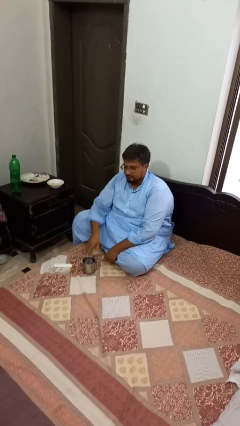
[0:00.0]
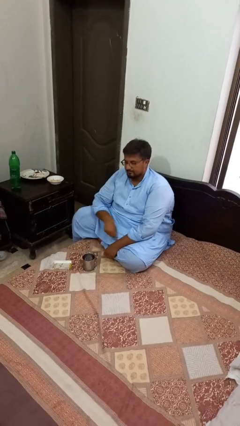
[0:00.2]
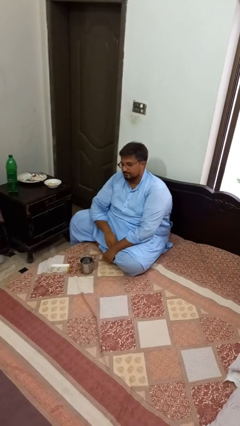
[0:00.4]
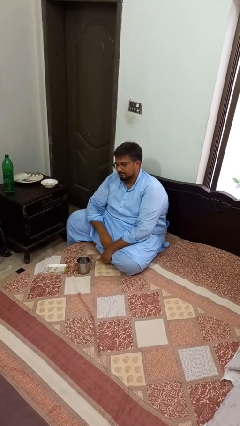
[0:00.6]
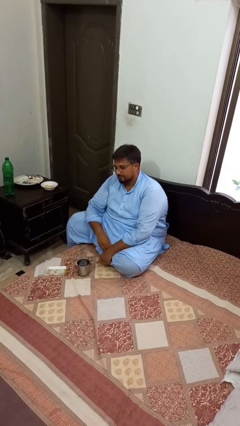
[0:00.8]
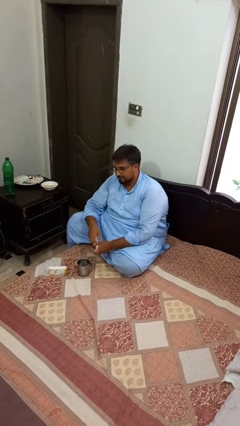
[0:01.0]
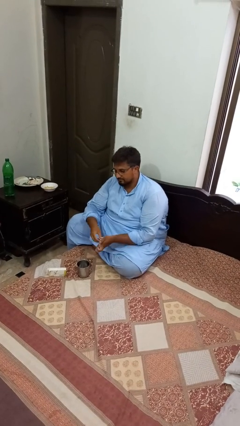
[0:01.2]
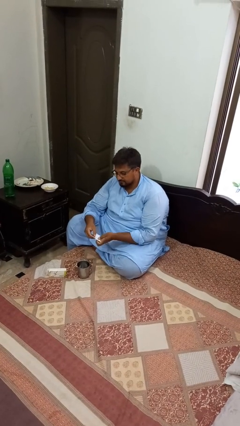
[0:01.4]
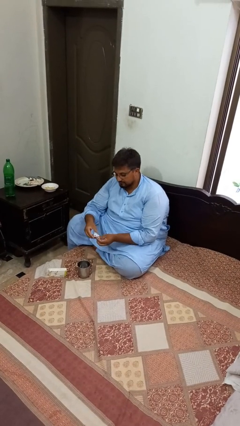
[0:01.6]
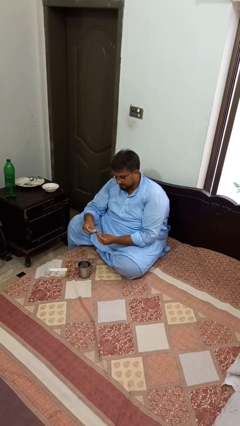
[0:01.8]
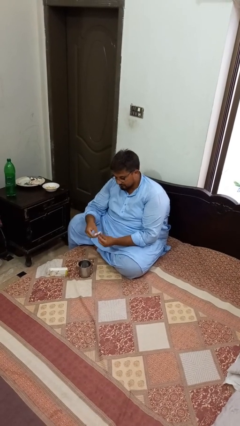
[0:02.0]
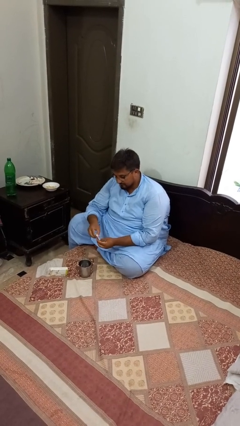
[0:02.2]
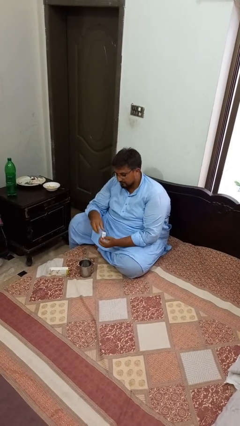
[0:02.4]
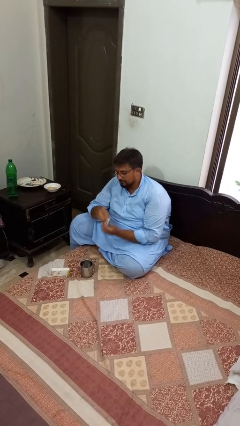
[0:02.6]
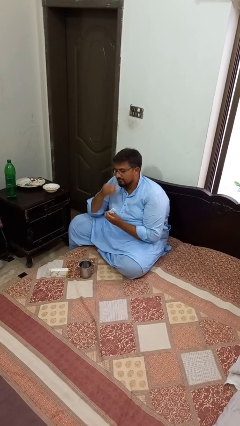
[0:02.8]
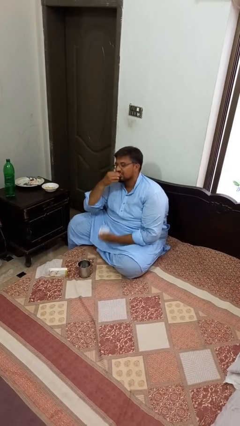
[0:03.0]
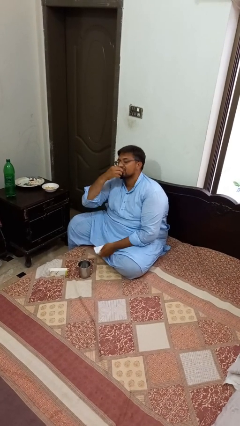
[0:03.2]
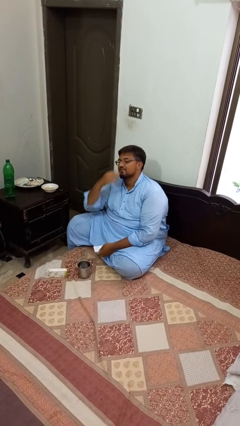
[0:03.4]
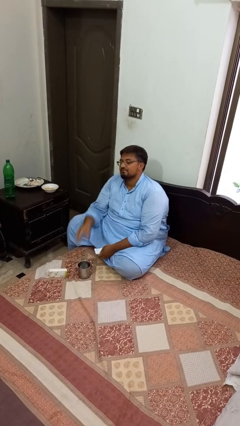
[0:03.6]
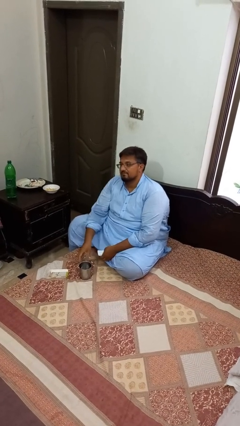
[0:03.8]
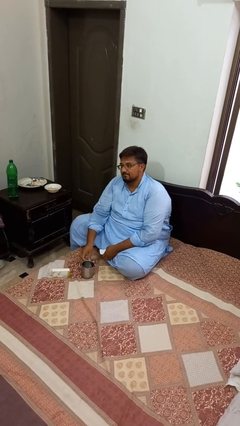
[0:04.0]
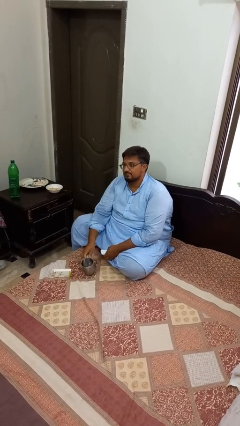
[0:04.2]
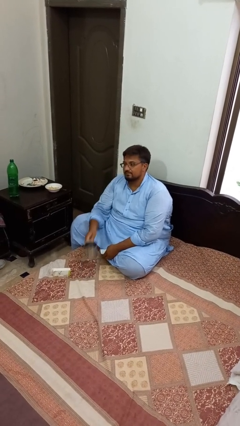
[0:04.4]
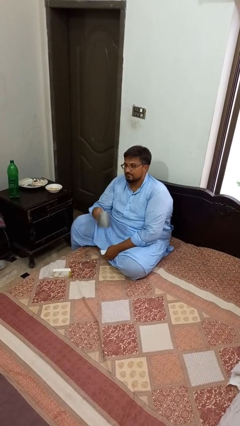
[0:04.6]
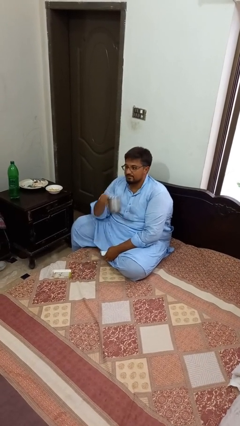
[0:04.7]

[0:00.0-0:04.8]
person takes medicine pills

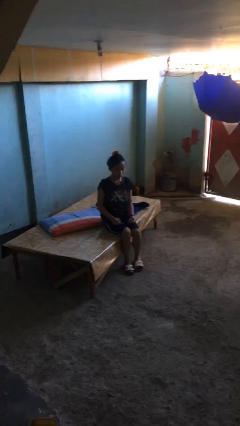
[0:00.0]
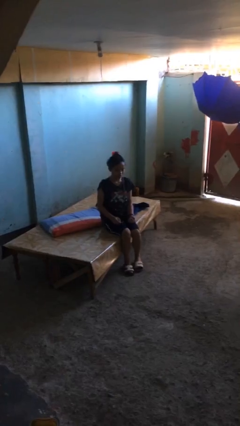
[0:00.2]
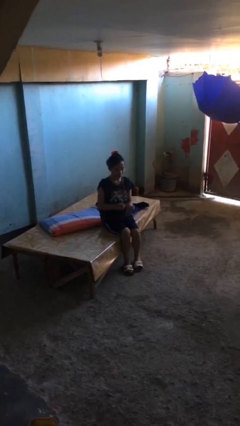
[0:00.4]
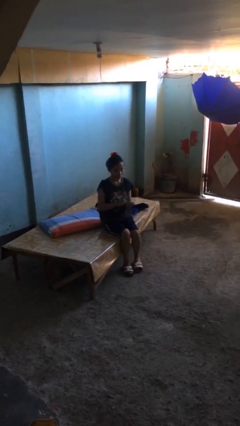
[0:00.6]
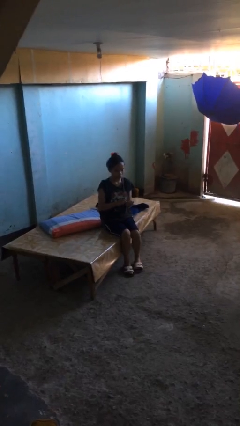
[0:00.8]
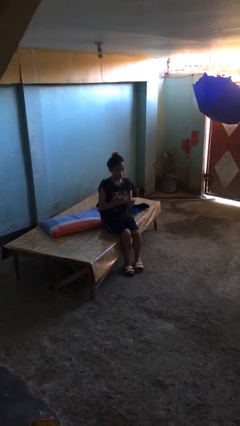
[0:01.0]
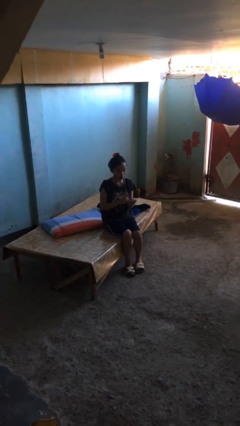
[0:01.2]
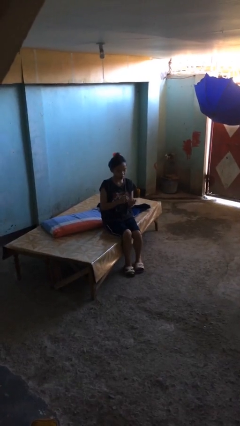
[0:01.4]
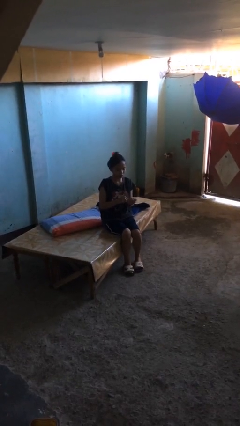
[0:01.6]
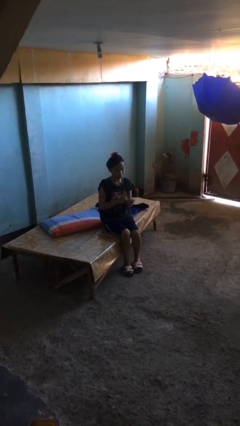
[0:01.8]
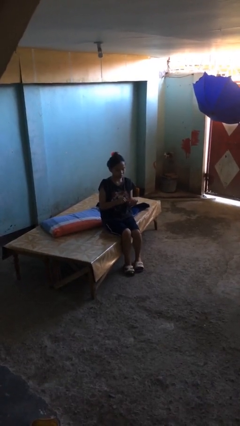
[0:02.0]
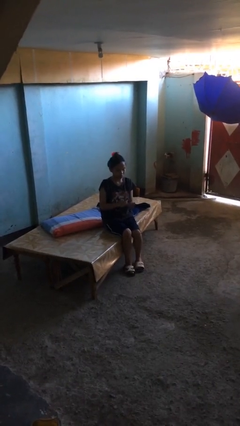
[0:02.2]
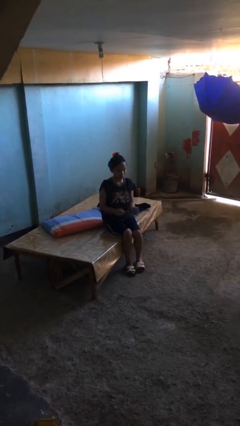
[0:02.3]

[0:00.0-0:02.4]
person files fingernails

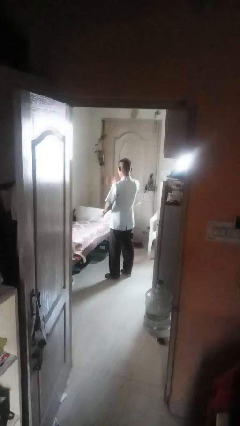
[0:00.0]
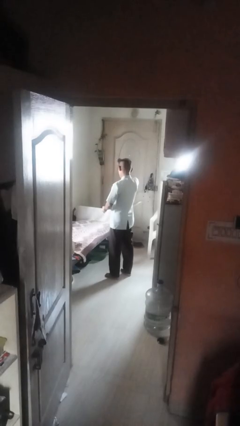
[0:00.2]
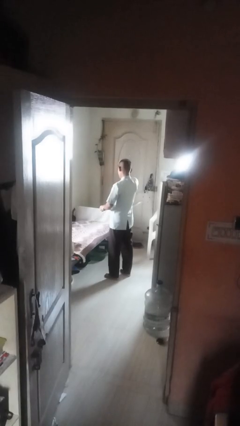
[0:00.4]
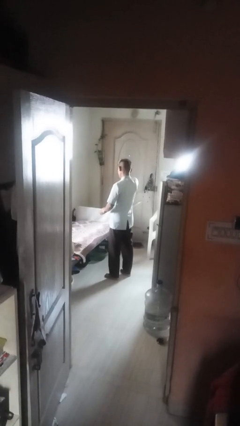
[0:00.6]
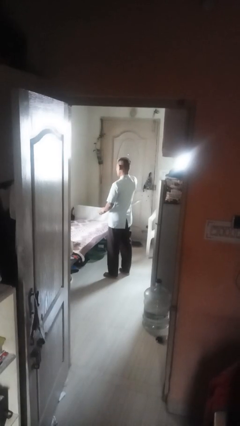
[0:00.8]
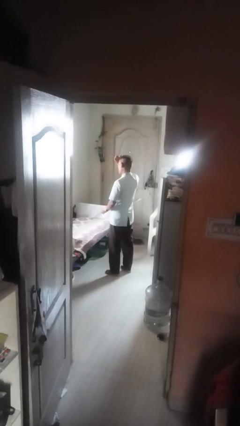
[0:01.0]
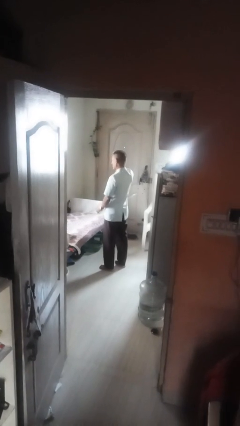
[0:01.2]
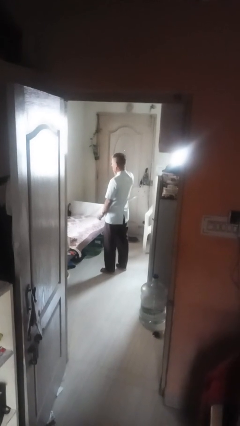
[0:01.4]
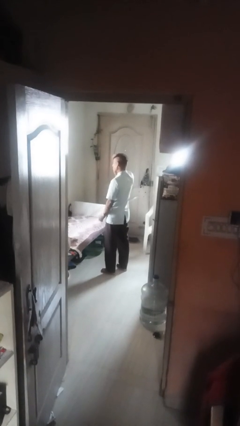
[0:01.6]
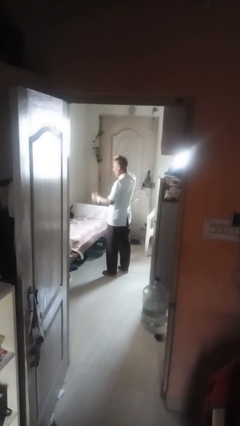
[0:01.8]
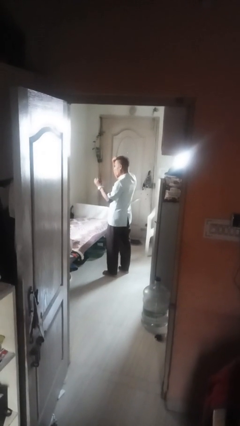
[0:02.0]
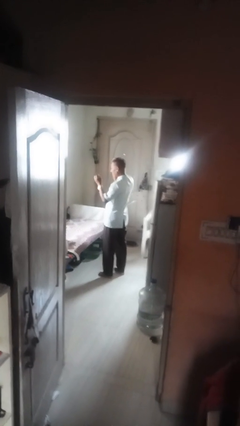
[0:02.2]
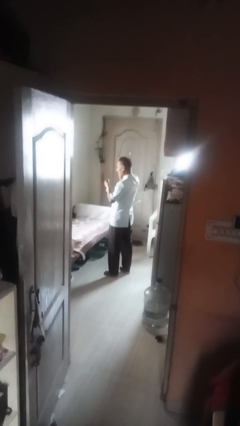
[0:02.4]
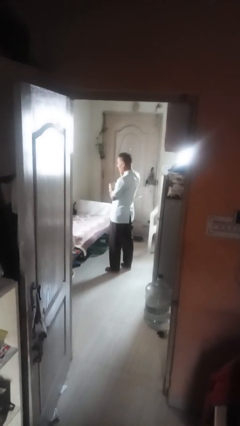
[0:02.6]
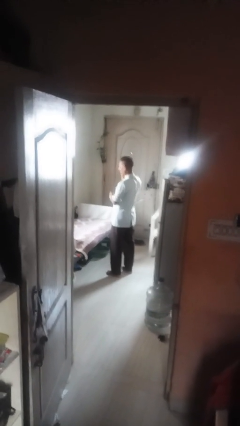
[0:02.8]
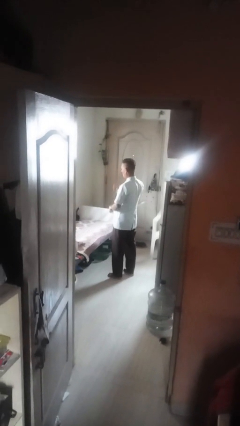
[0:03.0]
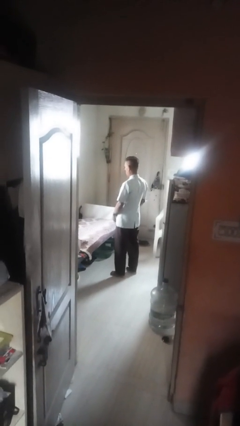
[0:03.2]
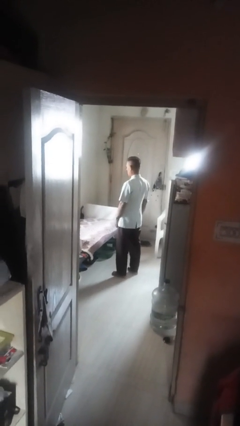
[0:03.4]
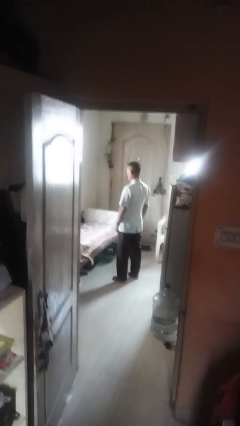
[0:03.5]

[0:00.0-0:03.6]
person strokes hair

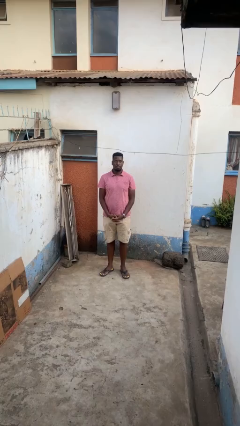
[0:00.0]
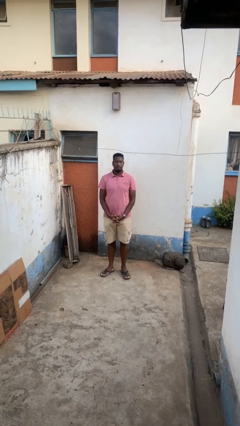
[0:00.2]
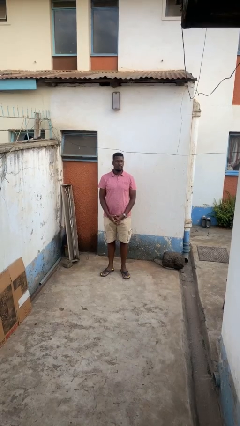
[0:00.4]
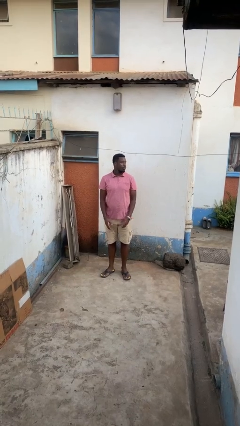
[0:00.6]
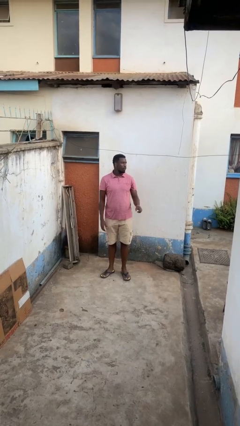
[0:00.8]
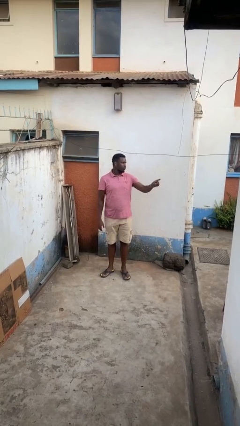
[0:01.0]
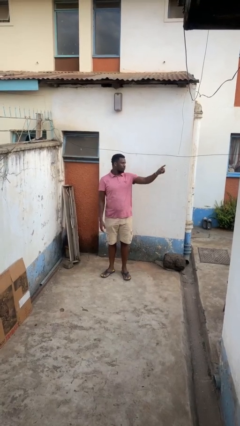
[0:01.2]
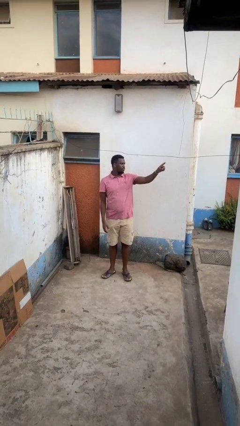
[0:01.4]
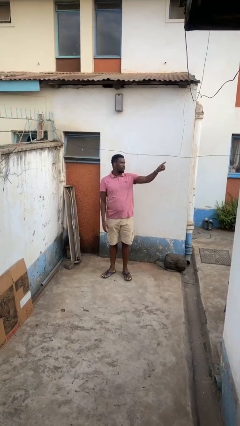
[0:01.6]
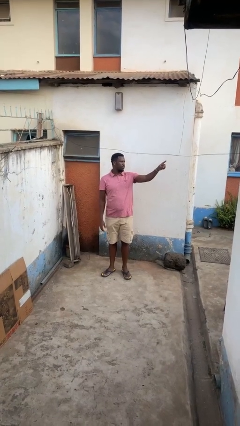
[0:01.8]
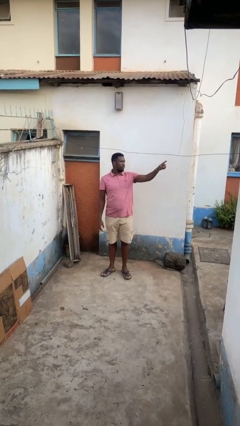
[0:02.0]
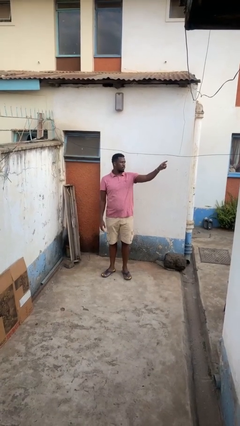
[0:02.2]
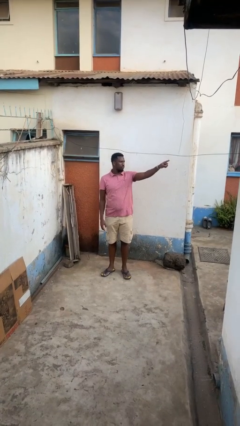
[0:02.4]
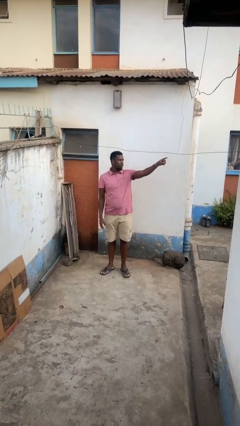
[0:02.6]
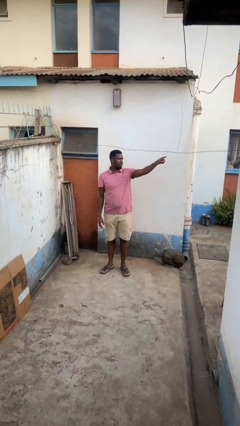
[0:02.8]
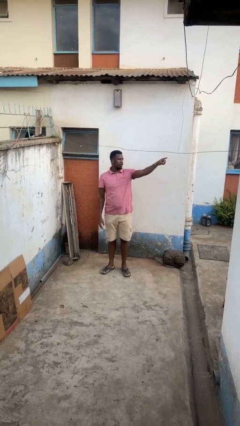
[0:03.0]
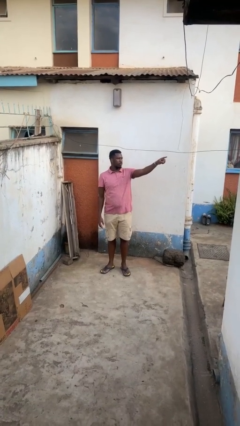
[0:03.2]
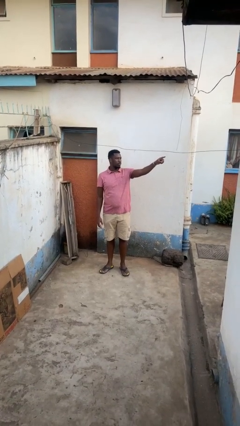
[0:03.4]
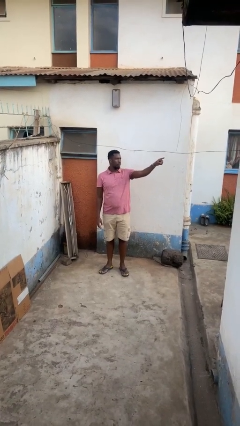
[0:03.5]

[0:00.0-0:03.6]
person points at person

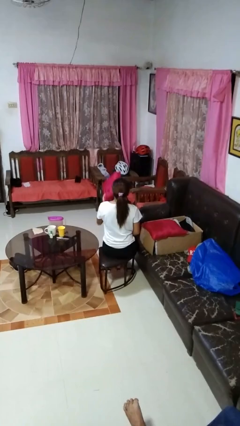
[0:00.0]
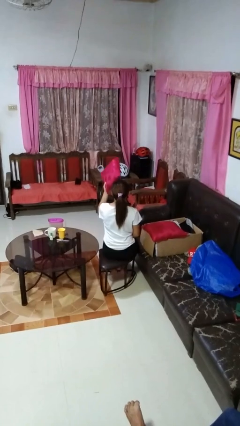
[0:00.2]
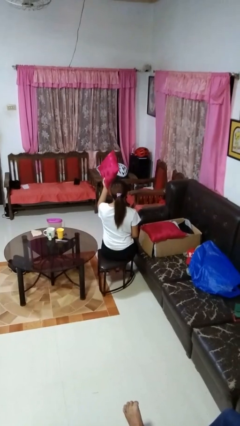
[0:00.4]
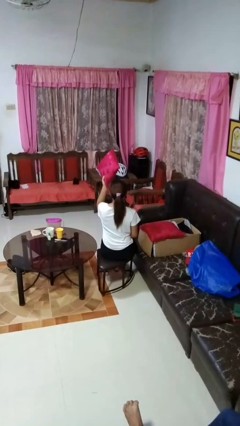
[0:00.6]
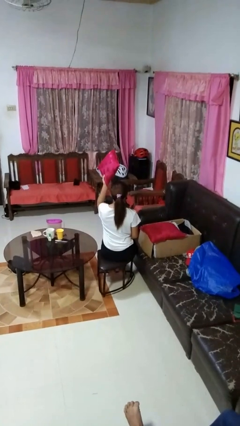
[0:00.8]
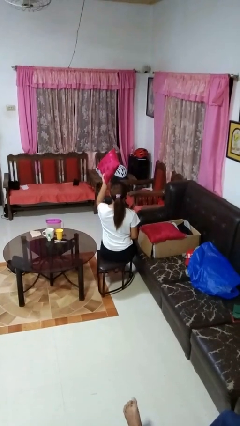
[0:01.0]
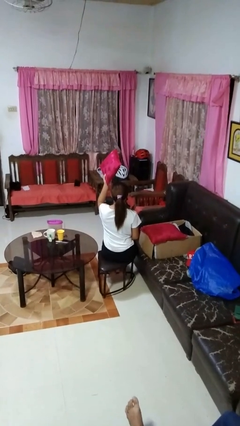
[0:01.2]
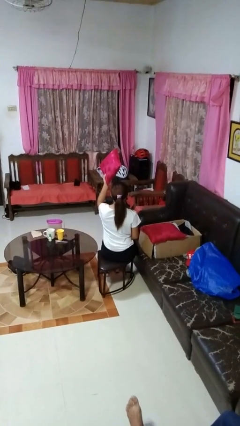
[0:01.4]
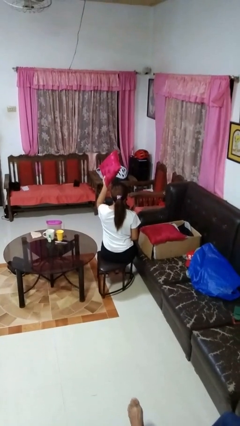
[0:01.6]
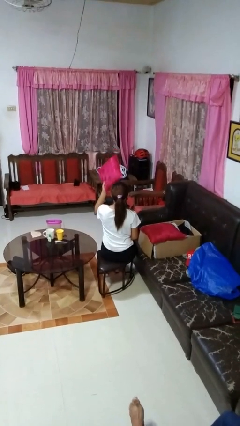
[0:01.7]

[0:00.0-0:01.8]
person holds object above head

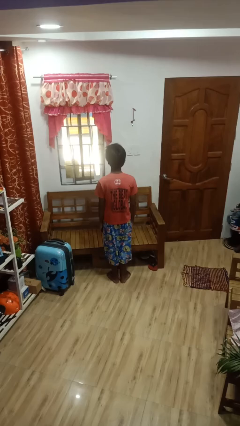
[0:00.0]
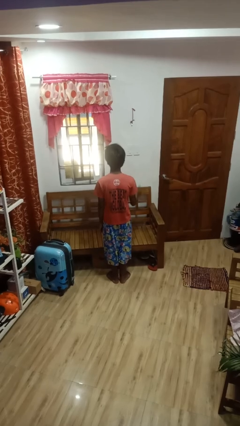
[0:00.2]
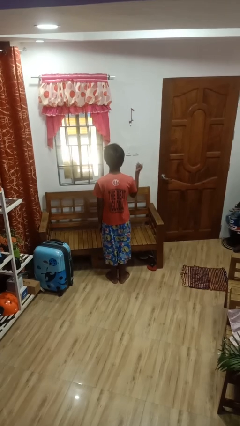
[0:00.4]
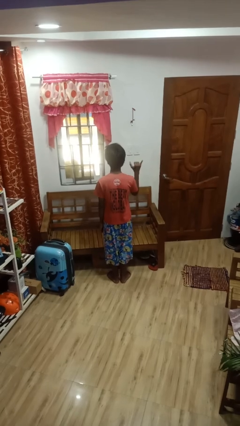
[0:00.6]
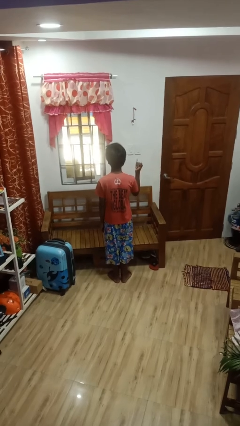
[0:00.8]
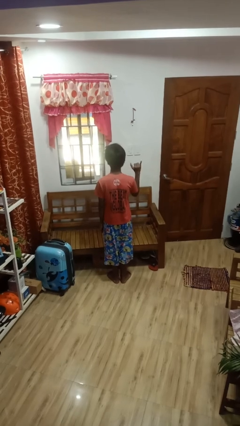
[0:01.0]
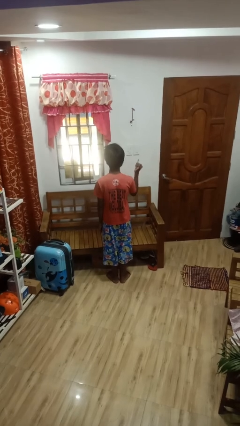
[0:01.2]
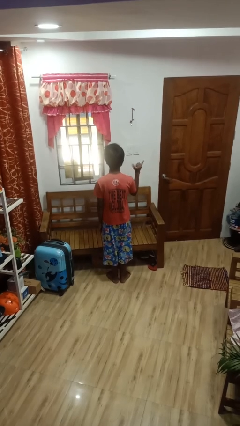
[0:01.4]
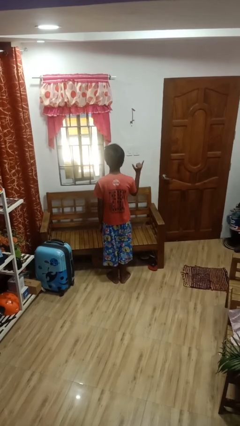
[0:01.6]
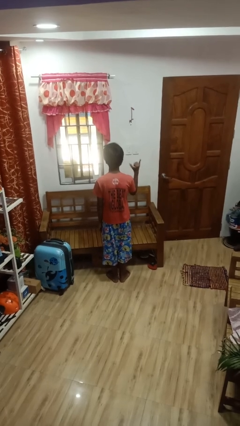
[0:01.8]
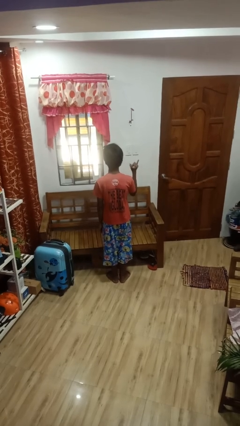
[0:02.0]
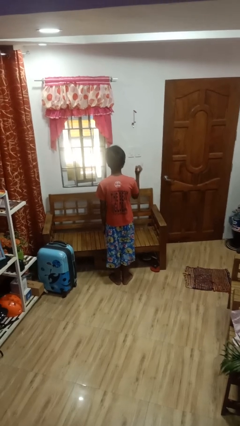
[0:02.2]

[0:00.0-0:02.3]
person gestures hang loose
